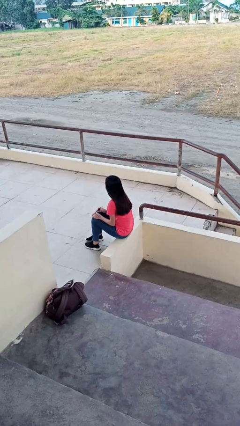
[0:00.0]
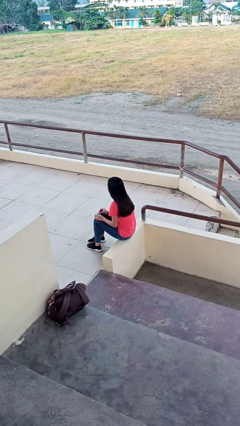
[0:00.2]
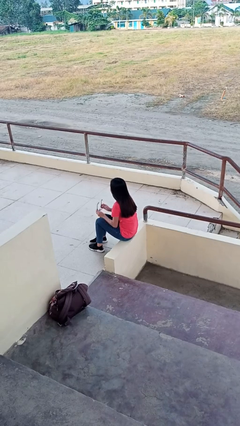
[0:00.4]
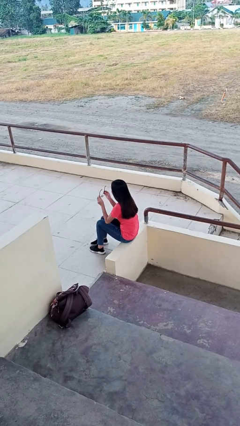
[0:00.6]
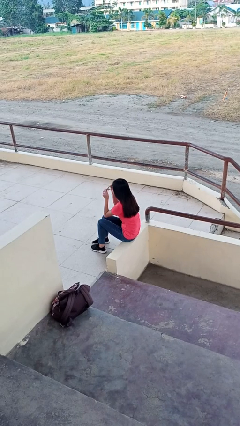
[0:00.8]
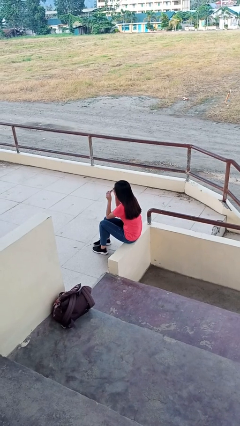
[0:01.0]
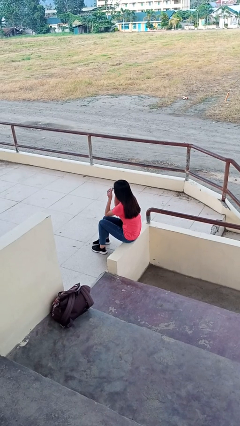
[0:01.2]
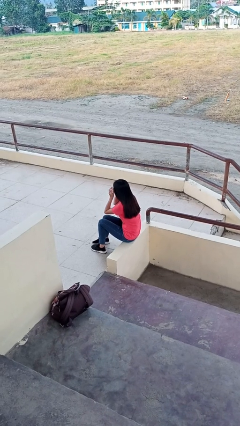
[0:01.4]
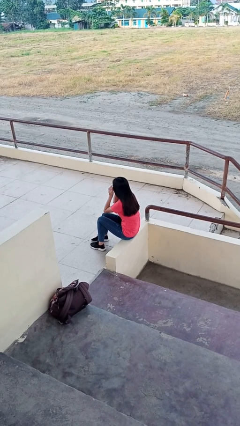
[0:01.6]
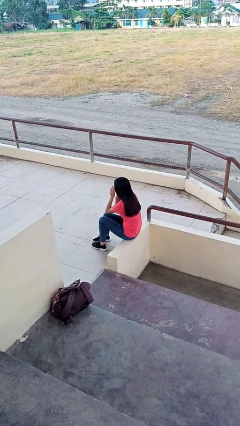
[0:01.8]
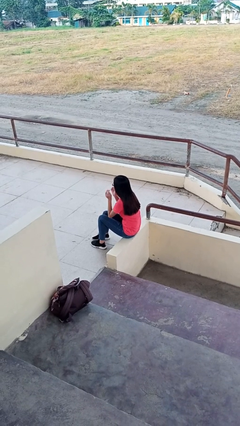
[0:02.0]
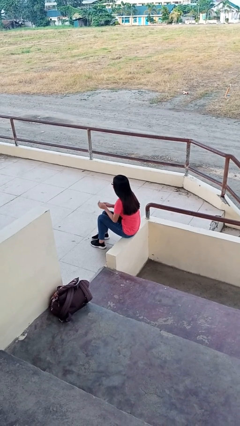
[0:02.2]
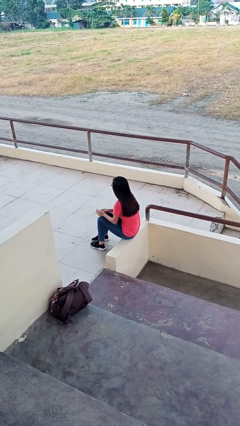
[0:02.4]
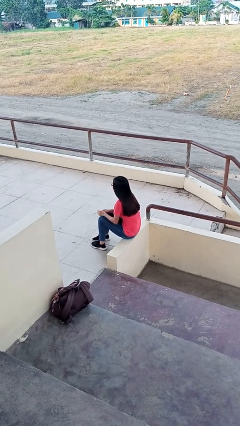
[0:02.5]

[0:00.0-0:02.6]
person puts on glasses

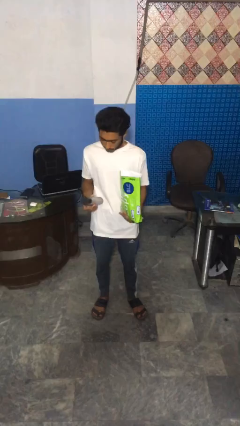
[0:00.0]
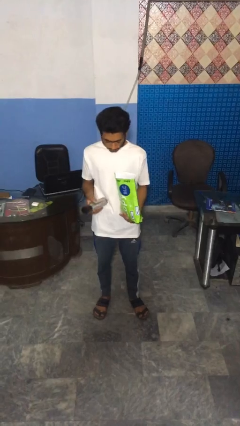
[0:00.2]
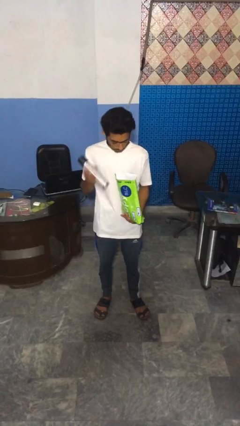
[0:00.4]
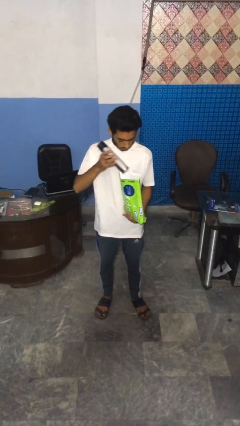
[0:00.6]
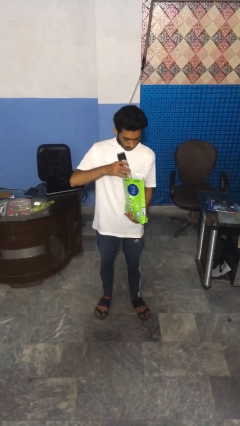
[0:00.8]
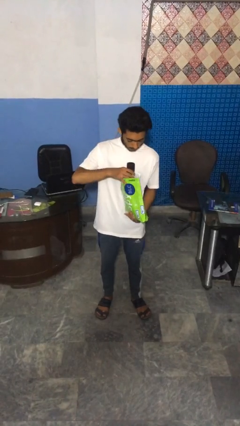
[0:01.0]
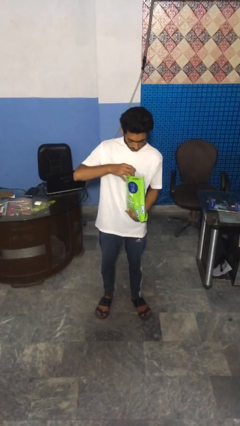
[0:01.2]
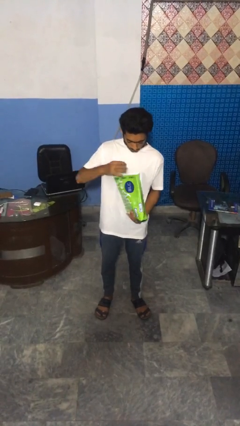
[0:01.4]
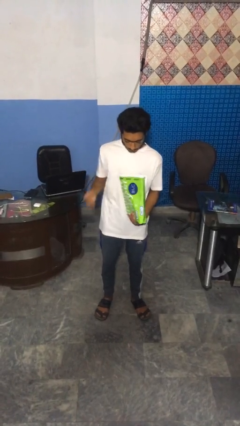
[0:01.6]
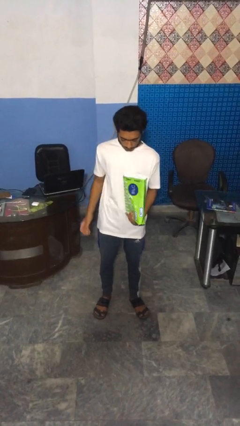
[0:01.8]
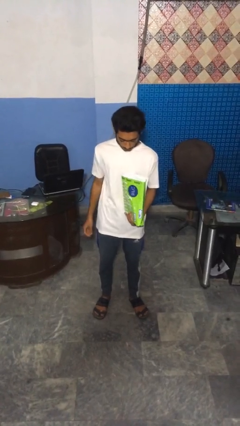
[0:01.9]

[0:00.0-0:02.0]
person puts object into bag

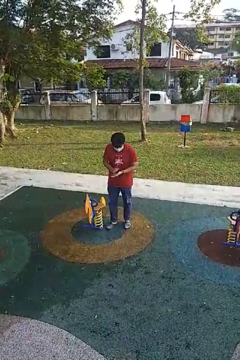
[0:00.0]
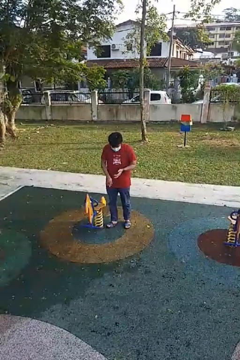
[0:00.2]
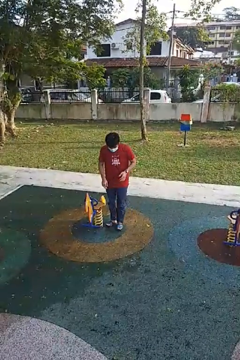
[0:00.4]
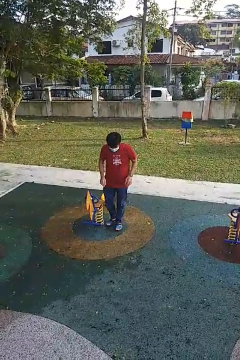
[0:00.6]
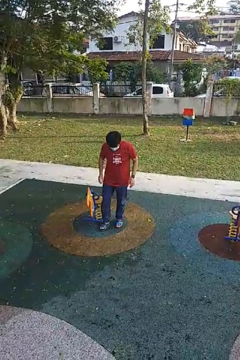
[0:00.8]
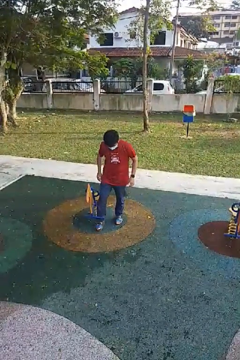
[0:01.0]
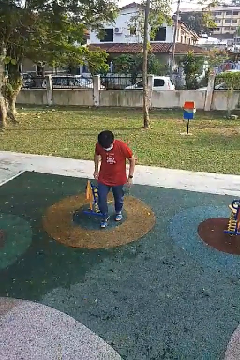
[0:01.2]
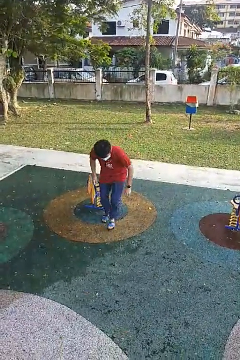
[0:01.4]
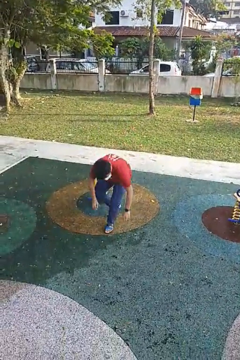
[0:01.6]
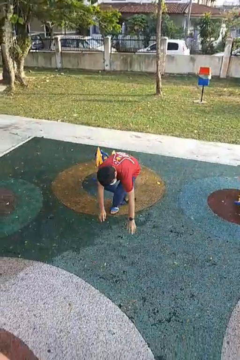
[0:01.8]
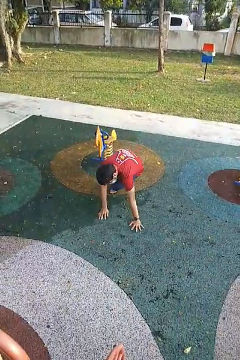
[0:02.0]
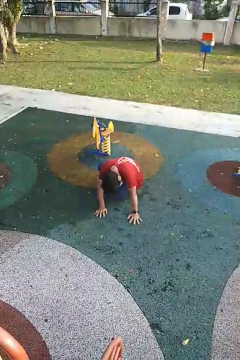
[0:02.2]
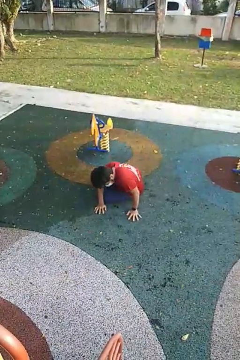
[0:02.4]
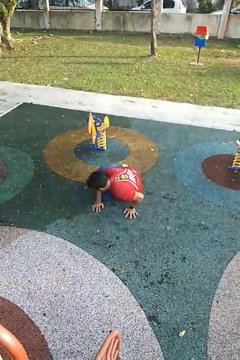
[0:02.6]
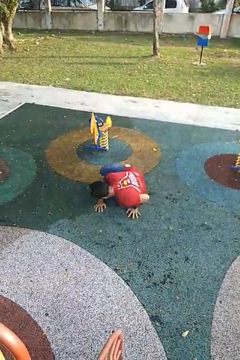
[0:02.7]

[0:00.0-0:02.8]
person trips on object on floor

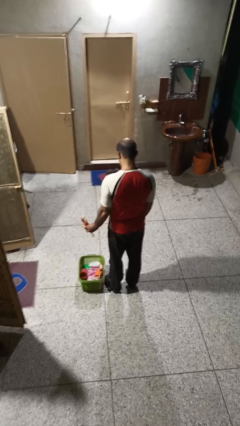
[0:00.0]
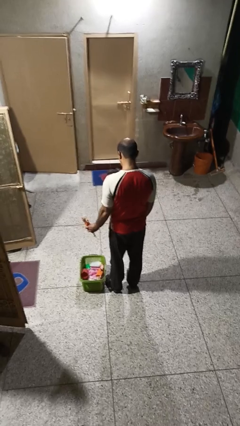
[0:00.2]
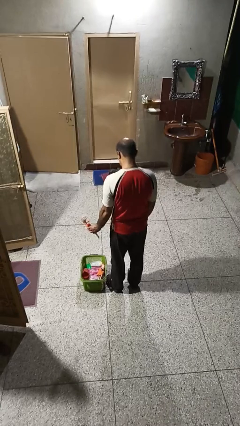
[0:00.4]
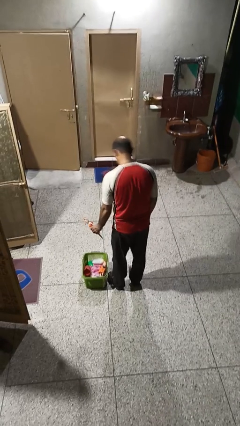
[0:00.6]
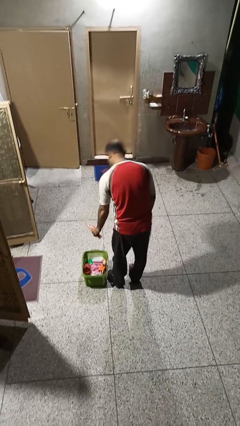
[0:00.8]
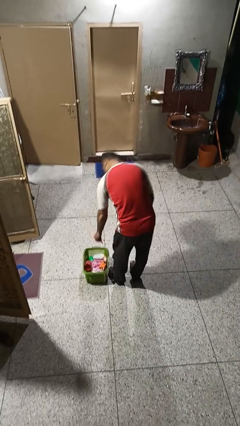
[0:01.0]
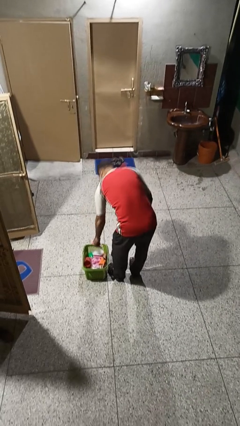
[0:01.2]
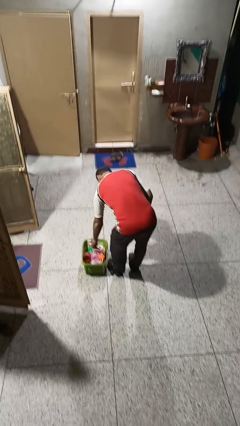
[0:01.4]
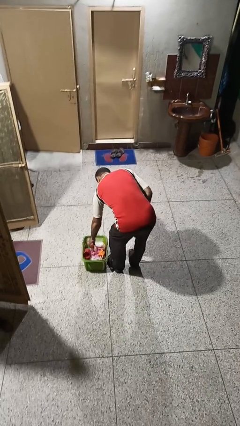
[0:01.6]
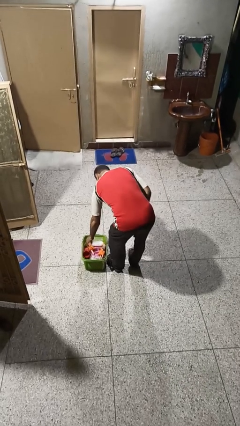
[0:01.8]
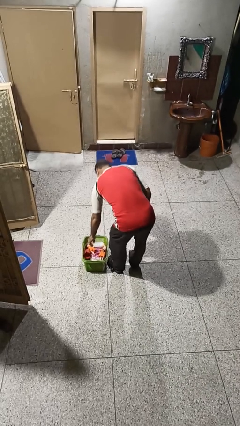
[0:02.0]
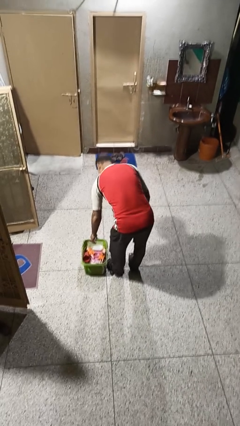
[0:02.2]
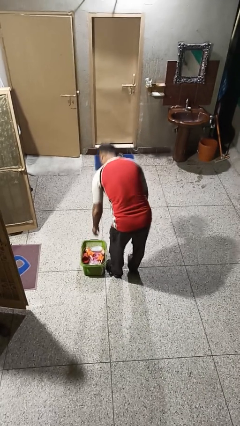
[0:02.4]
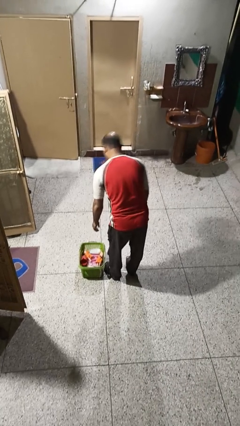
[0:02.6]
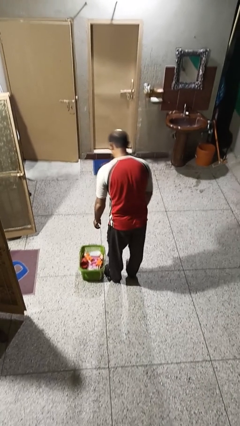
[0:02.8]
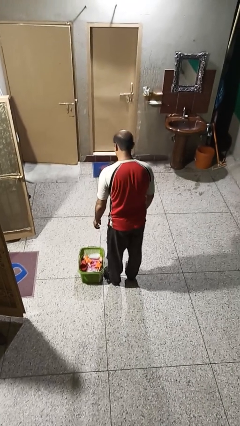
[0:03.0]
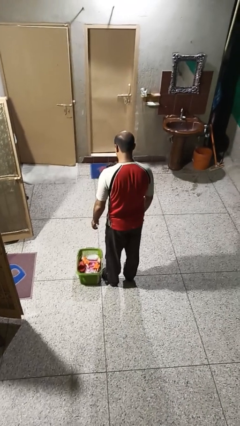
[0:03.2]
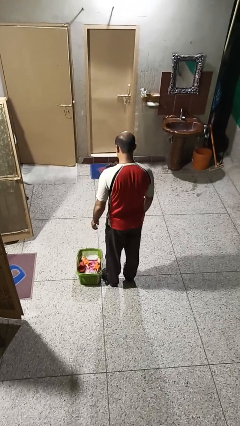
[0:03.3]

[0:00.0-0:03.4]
person puts object into basket

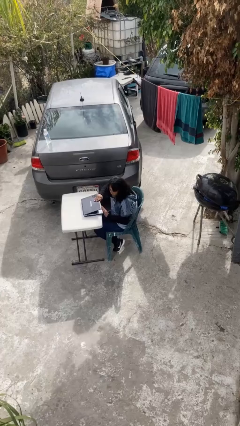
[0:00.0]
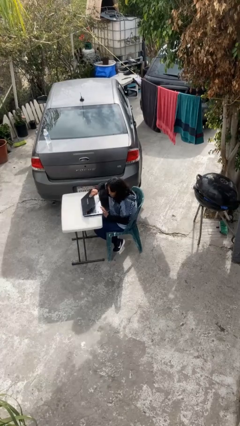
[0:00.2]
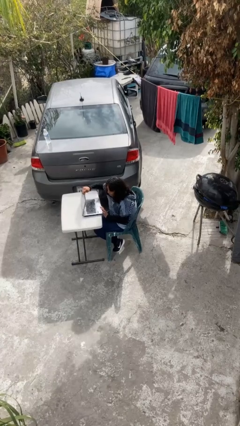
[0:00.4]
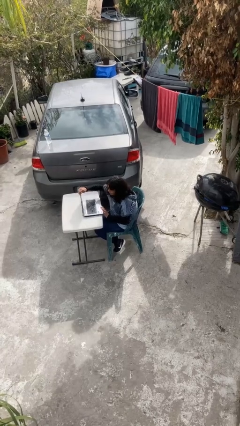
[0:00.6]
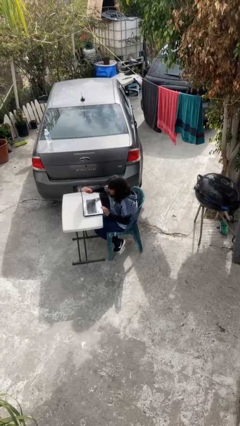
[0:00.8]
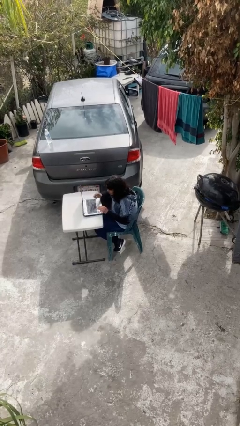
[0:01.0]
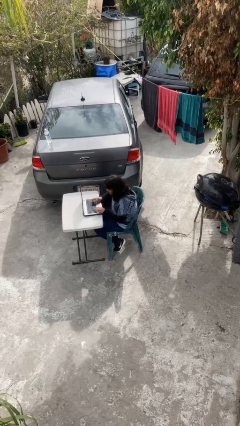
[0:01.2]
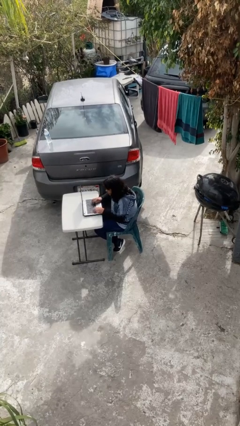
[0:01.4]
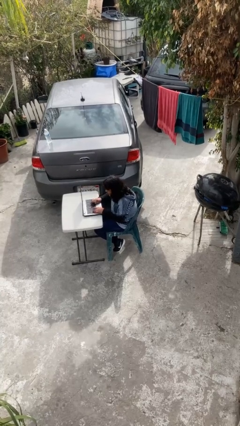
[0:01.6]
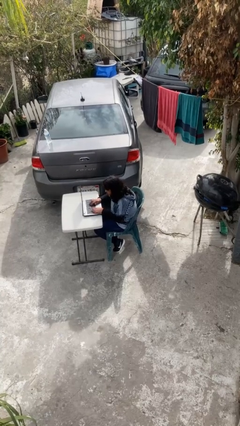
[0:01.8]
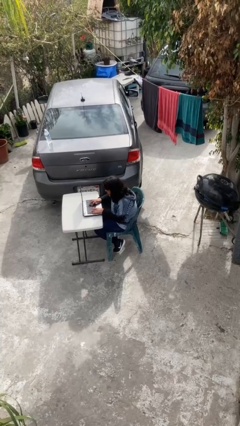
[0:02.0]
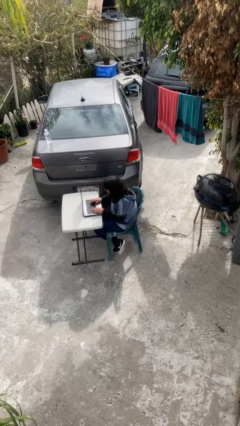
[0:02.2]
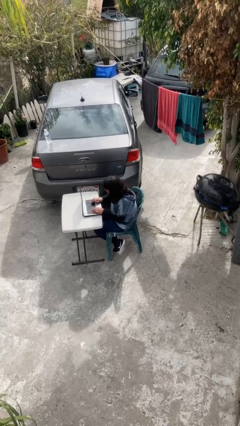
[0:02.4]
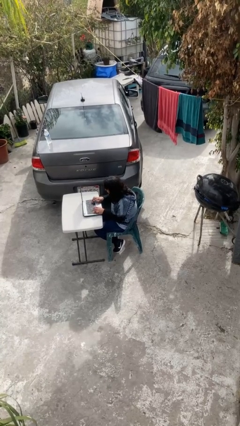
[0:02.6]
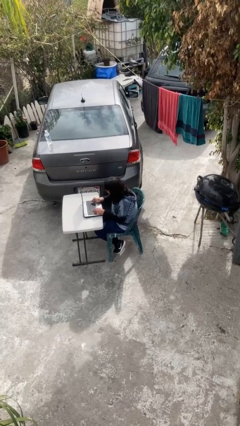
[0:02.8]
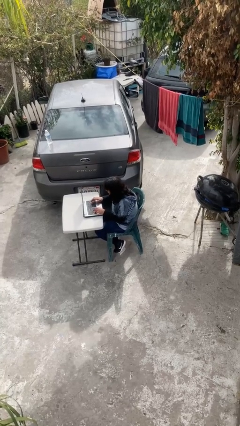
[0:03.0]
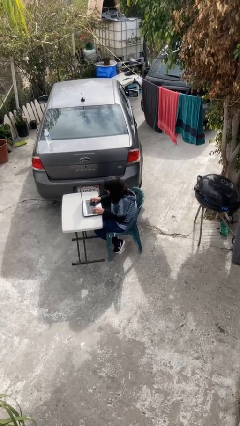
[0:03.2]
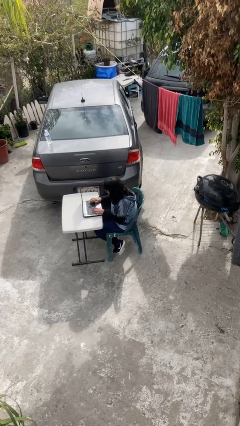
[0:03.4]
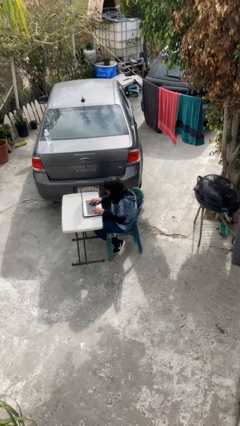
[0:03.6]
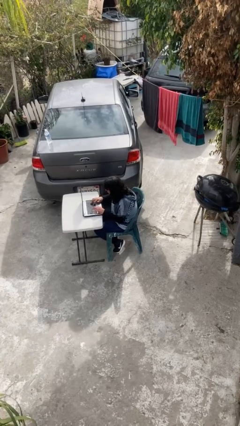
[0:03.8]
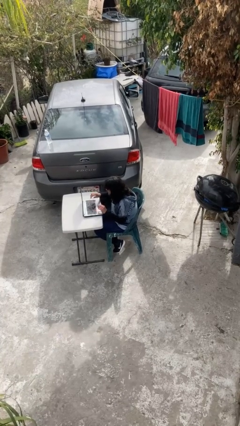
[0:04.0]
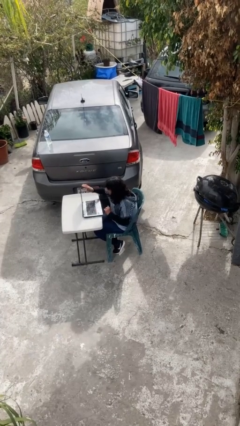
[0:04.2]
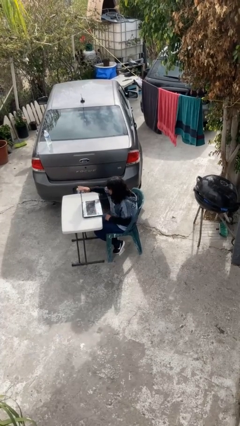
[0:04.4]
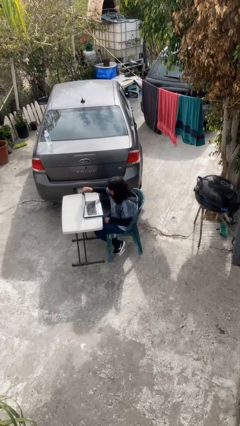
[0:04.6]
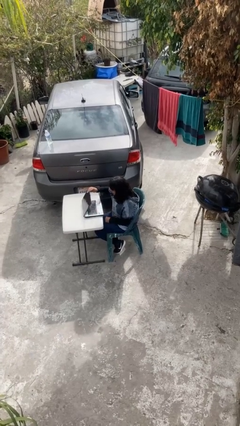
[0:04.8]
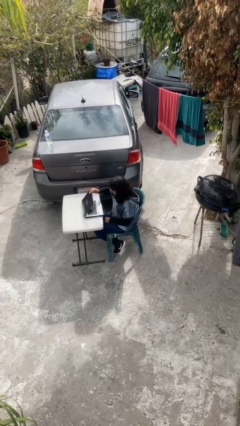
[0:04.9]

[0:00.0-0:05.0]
person interacts with laptop

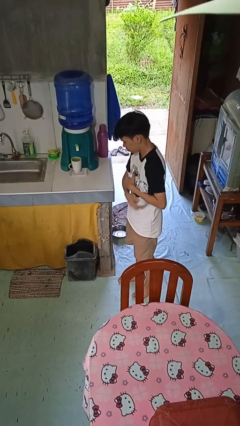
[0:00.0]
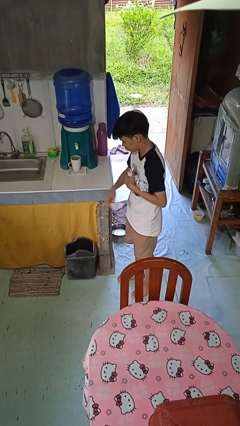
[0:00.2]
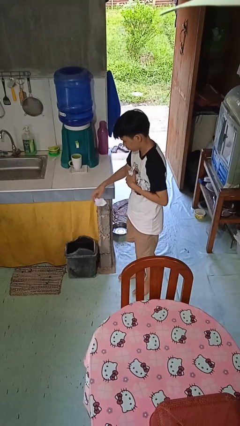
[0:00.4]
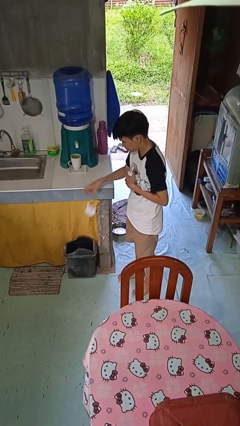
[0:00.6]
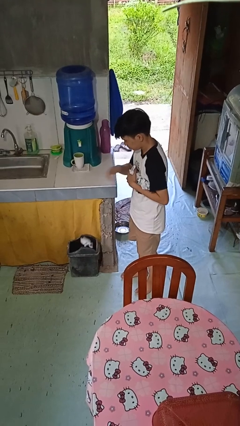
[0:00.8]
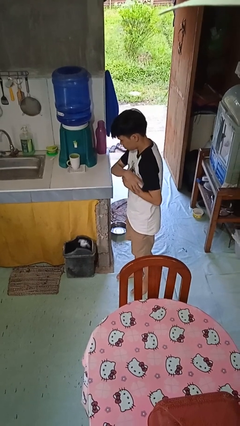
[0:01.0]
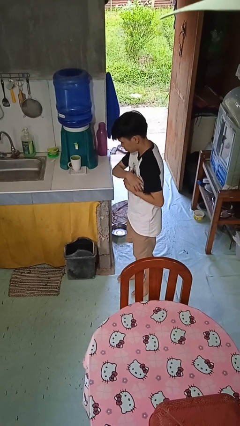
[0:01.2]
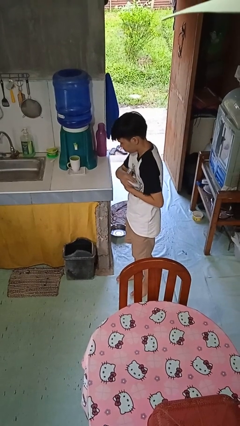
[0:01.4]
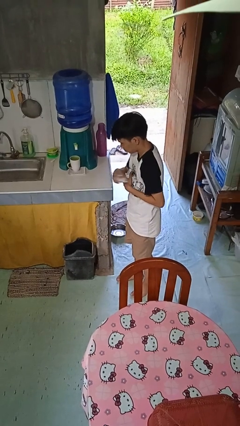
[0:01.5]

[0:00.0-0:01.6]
person discards trash
